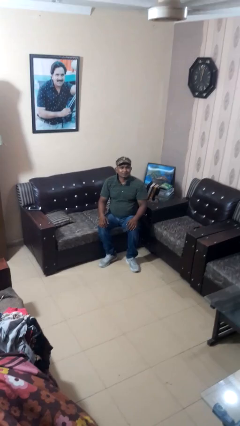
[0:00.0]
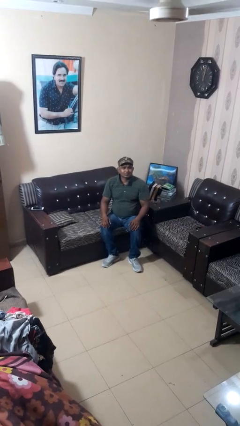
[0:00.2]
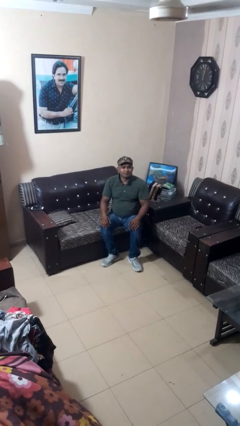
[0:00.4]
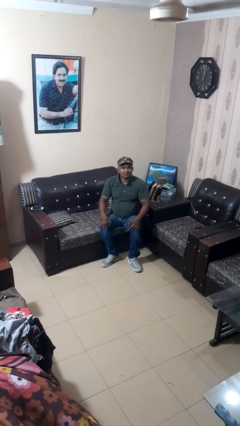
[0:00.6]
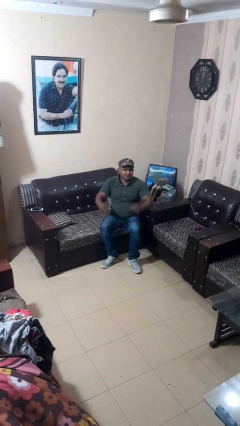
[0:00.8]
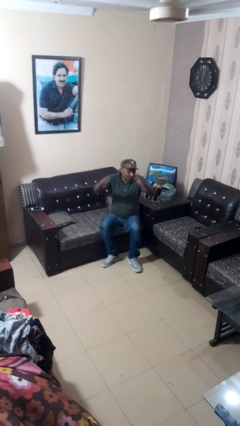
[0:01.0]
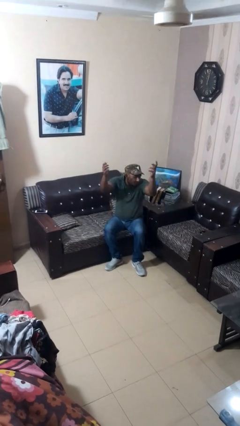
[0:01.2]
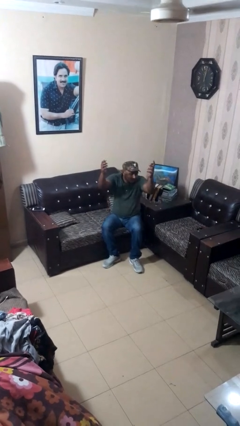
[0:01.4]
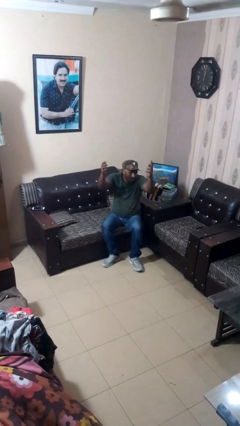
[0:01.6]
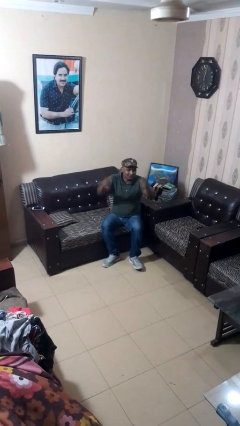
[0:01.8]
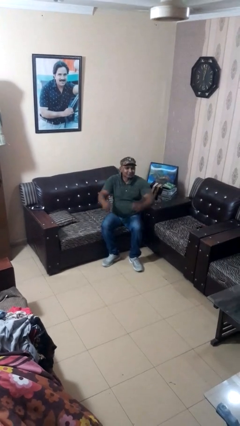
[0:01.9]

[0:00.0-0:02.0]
person shrugs

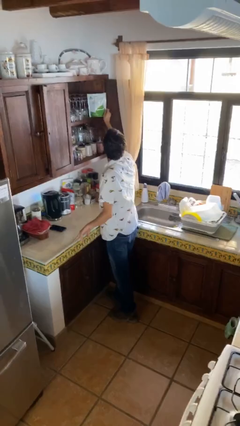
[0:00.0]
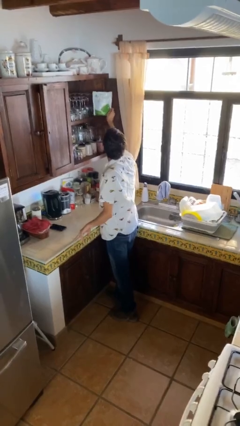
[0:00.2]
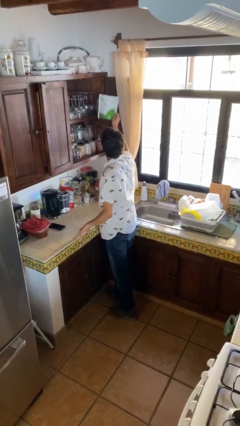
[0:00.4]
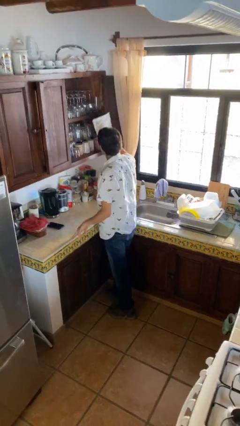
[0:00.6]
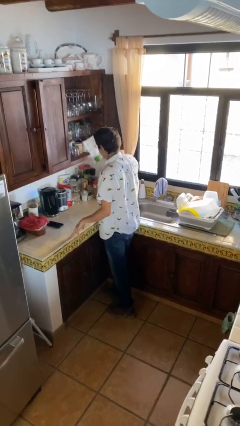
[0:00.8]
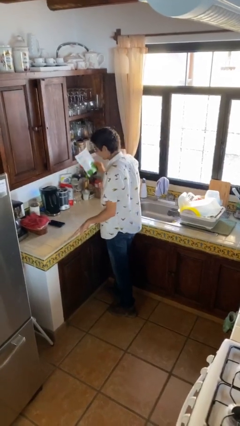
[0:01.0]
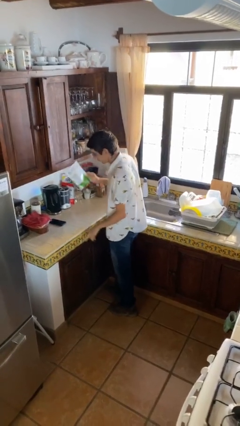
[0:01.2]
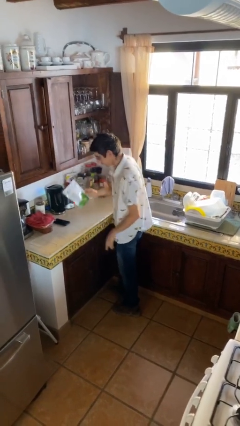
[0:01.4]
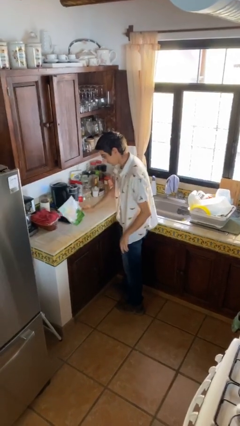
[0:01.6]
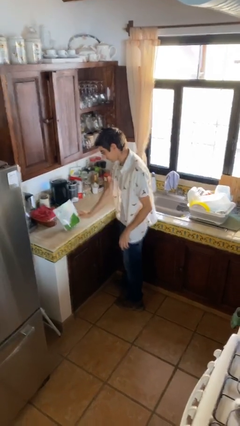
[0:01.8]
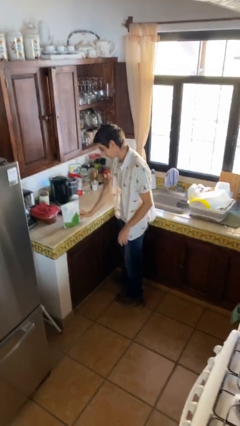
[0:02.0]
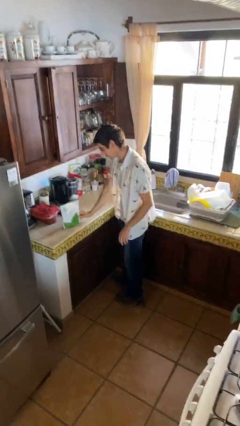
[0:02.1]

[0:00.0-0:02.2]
person picks up object from shelf

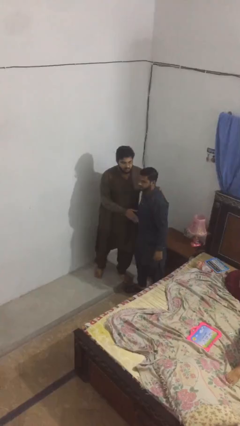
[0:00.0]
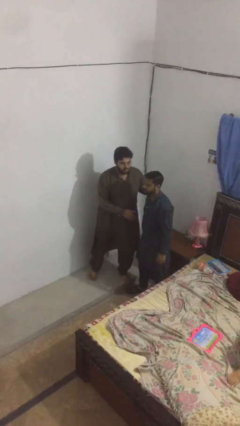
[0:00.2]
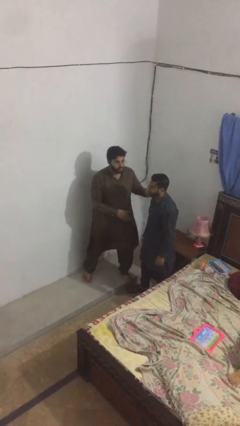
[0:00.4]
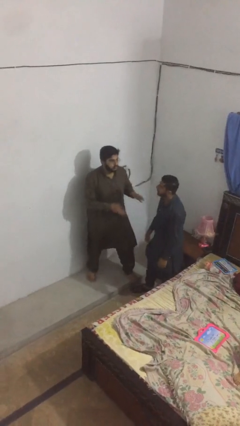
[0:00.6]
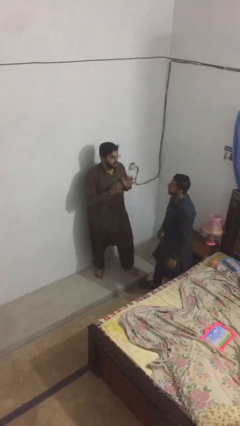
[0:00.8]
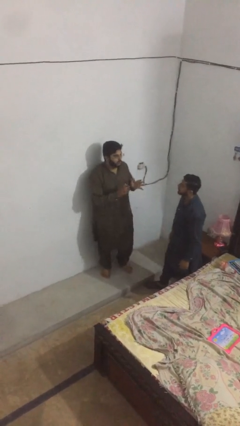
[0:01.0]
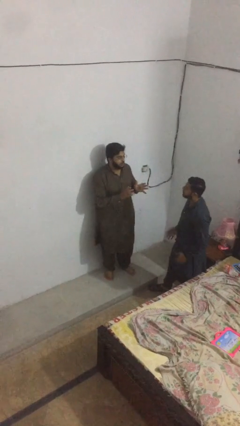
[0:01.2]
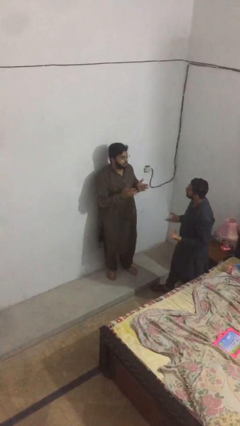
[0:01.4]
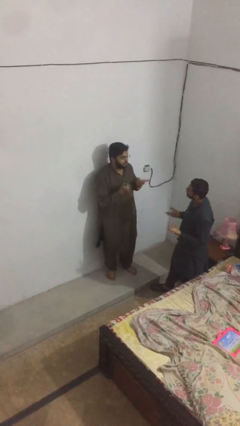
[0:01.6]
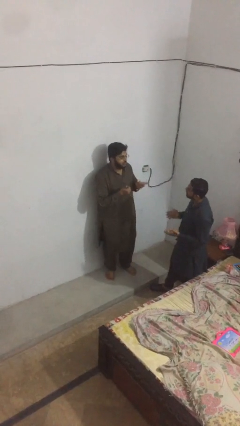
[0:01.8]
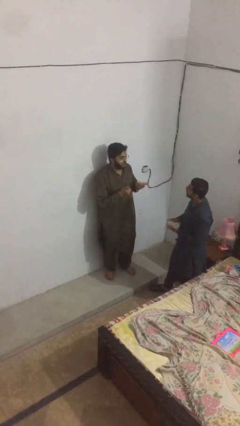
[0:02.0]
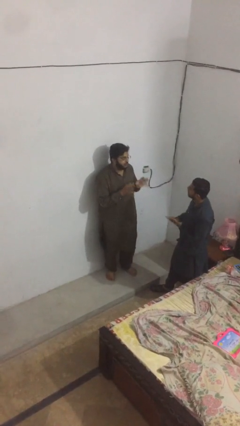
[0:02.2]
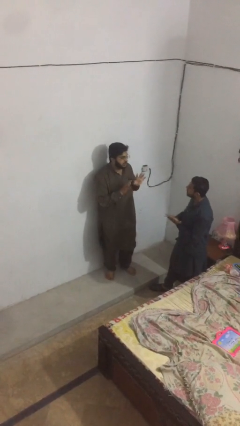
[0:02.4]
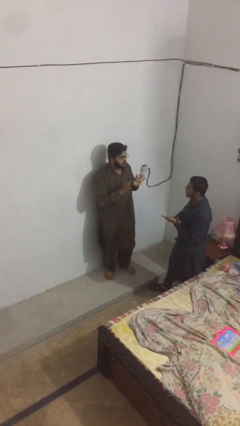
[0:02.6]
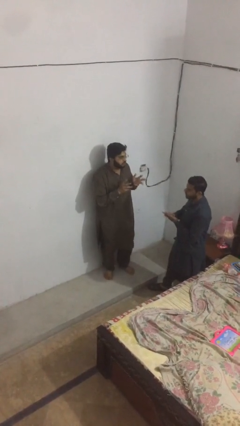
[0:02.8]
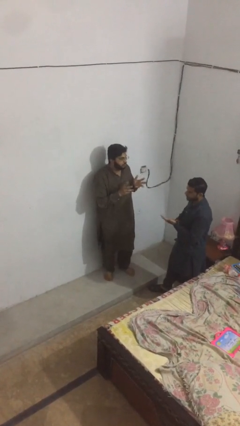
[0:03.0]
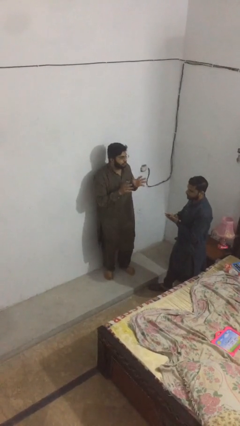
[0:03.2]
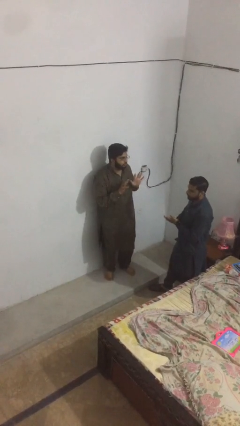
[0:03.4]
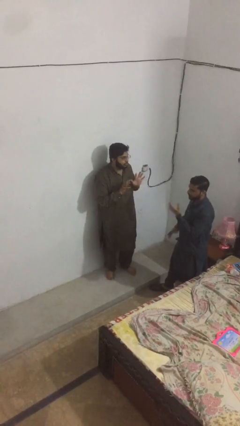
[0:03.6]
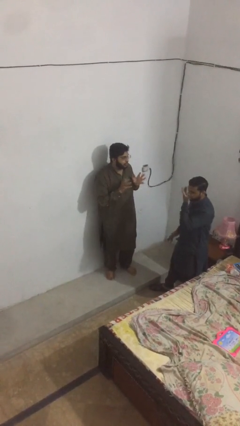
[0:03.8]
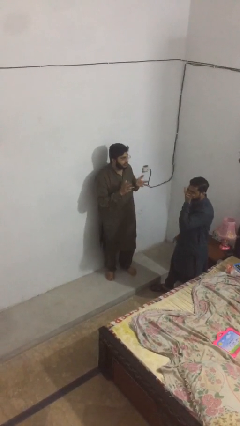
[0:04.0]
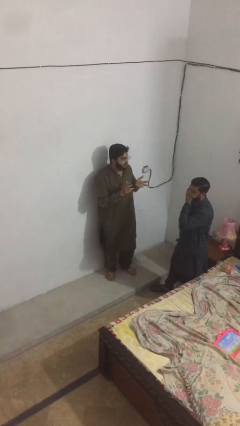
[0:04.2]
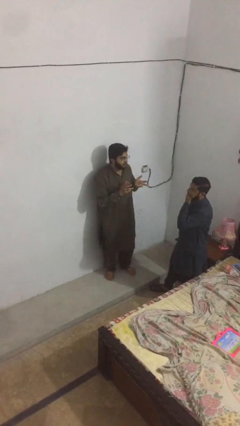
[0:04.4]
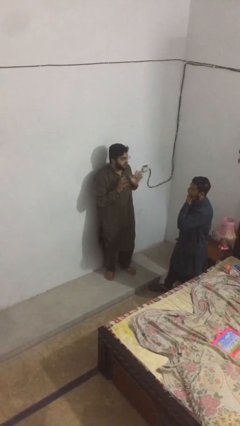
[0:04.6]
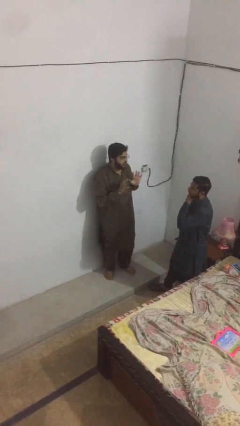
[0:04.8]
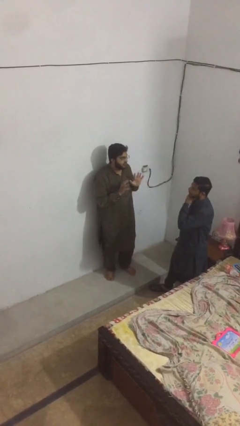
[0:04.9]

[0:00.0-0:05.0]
person talks to person

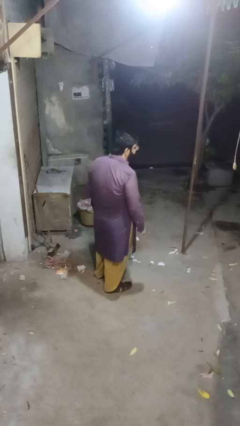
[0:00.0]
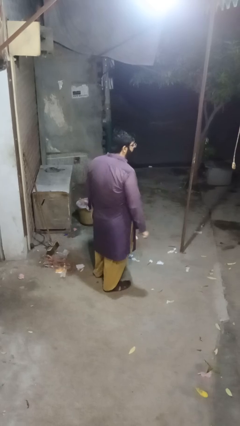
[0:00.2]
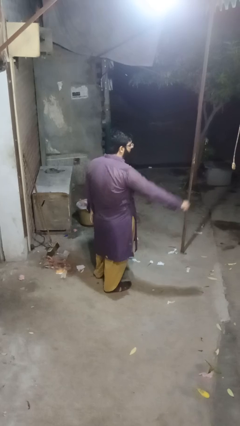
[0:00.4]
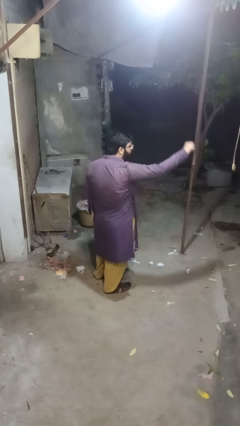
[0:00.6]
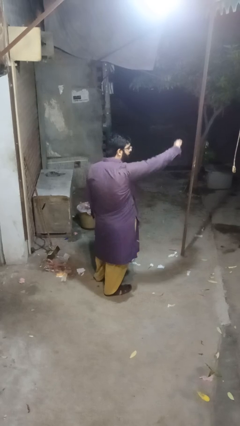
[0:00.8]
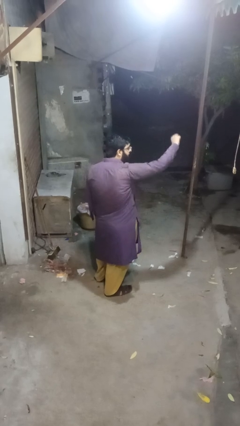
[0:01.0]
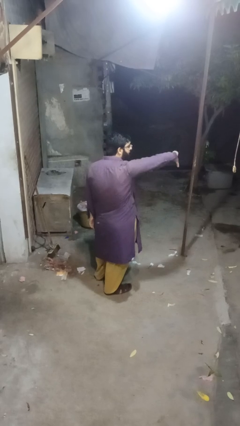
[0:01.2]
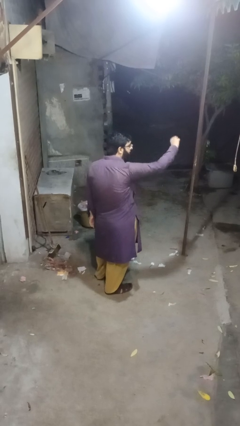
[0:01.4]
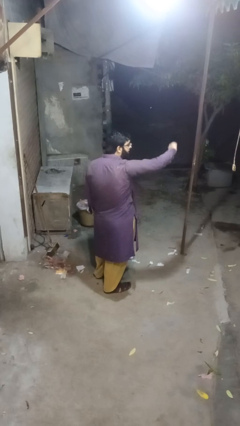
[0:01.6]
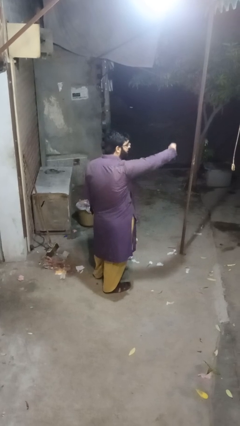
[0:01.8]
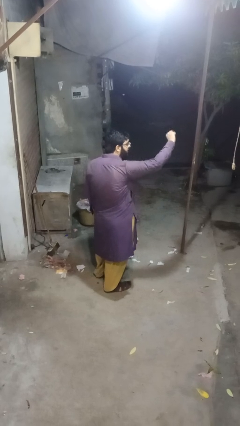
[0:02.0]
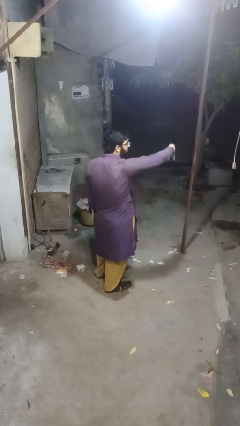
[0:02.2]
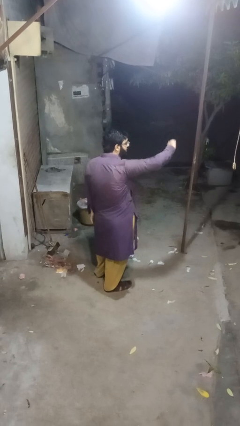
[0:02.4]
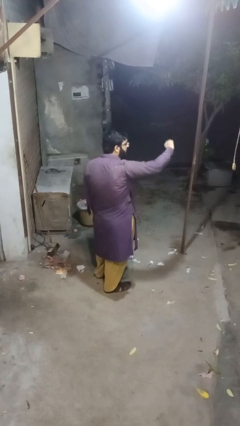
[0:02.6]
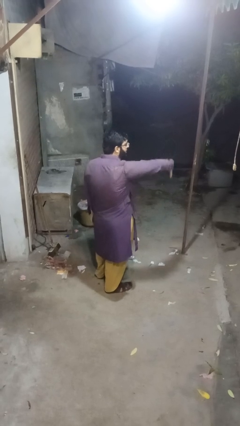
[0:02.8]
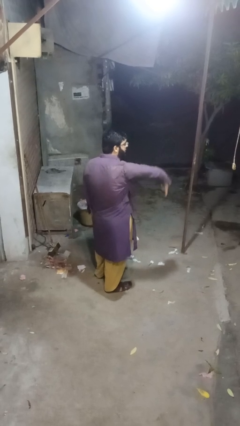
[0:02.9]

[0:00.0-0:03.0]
person gestures thumbs down

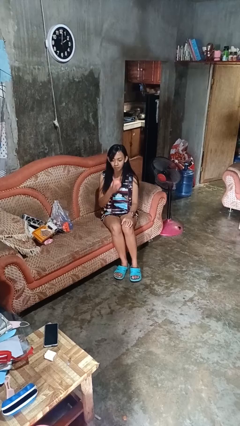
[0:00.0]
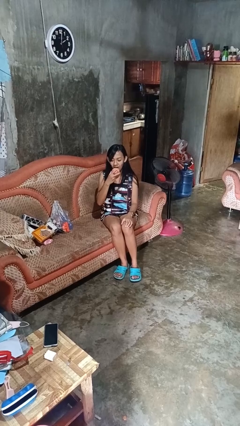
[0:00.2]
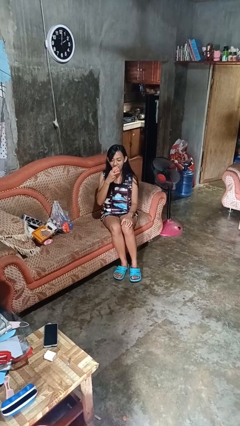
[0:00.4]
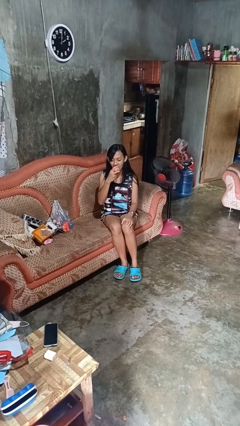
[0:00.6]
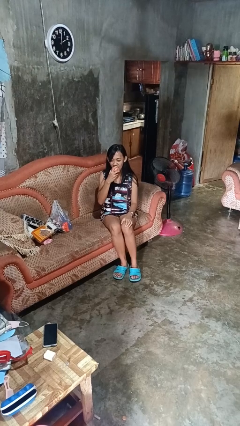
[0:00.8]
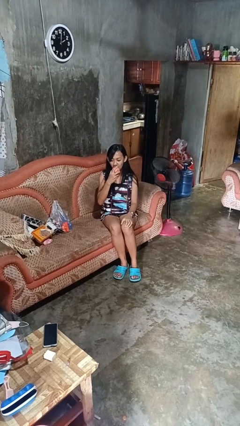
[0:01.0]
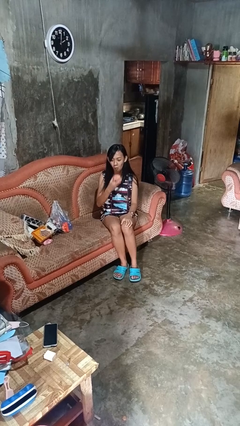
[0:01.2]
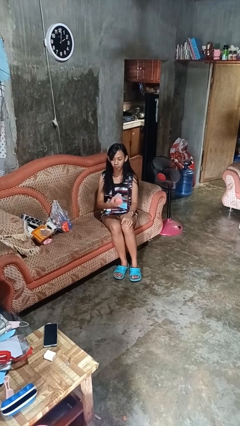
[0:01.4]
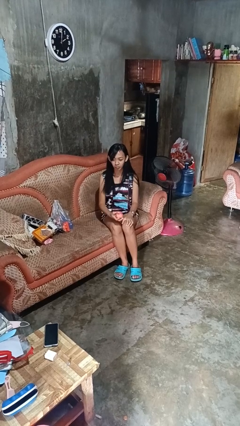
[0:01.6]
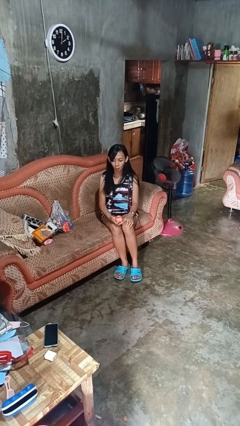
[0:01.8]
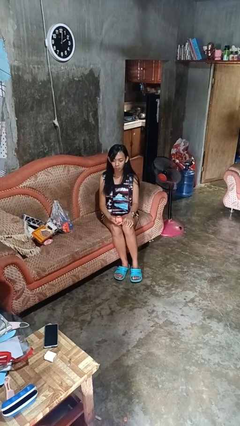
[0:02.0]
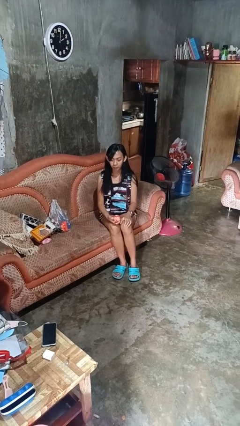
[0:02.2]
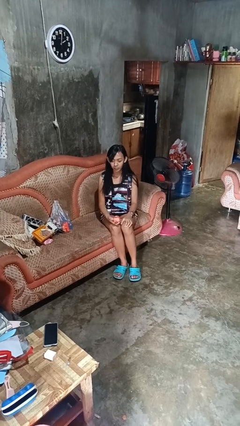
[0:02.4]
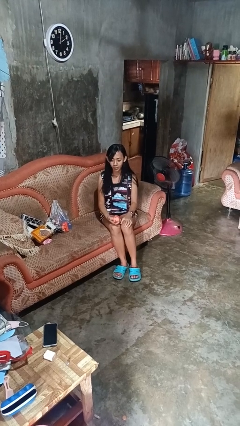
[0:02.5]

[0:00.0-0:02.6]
person eats apple

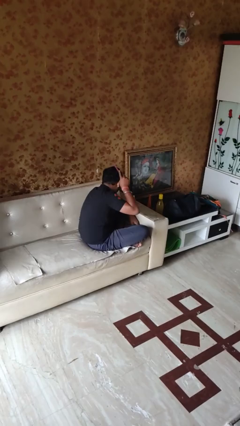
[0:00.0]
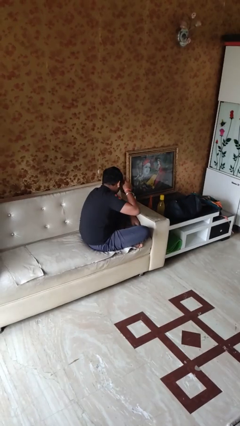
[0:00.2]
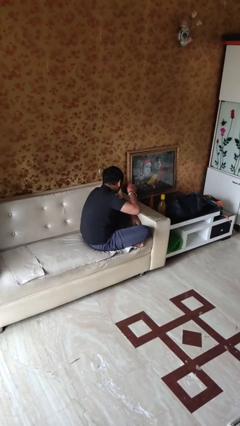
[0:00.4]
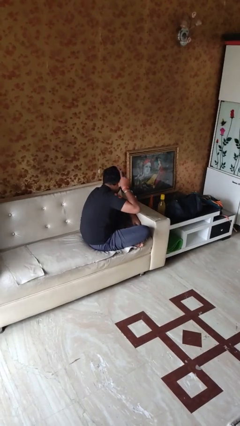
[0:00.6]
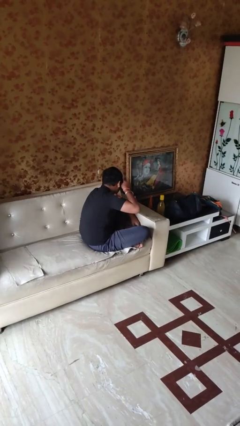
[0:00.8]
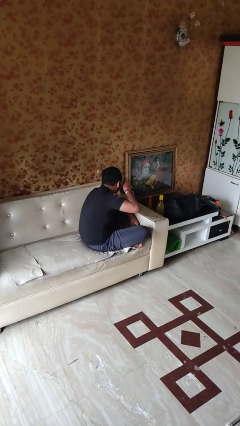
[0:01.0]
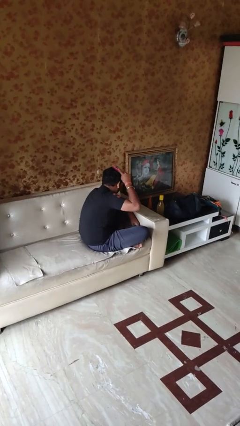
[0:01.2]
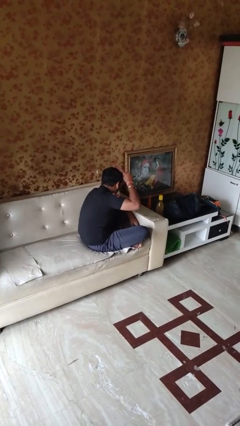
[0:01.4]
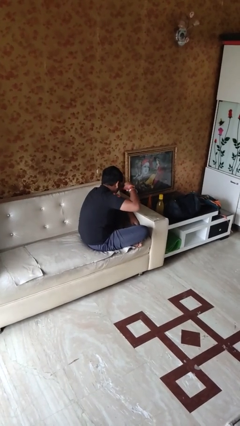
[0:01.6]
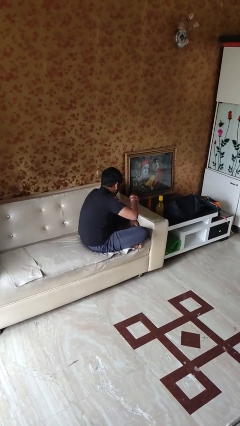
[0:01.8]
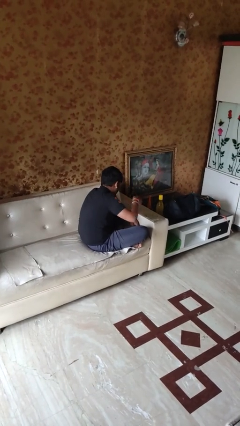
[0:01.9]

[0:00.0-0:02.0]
person brushes hair

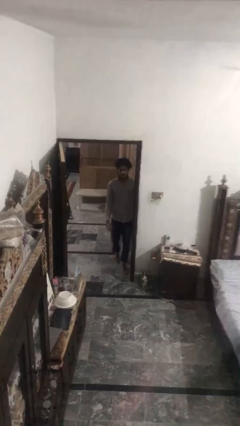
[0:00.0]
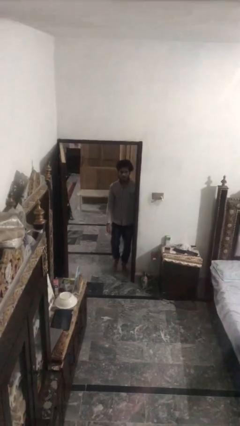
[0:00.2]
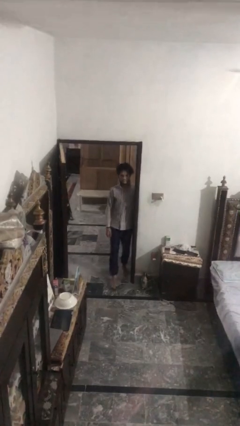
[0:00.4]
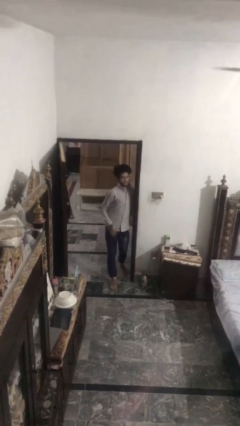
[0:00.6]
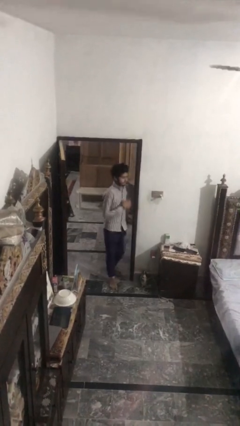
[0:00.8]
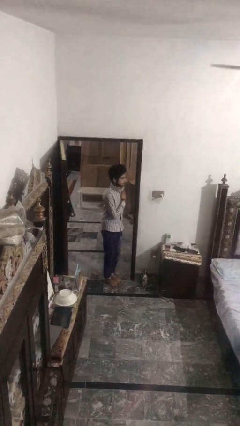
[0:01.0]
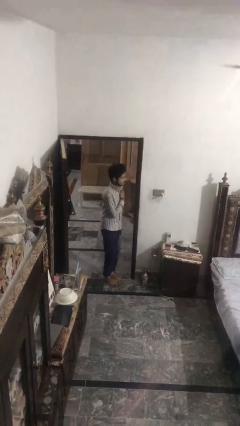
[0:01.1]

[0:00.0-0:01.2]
person bumps into wall
